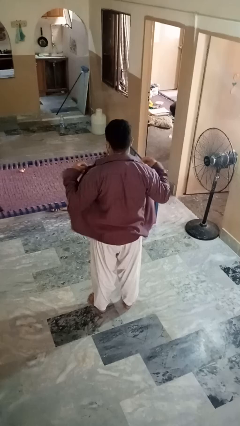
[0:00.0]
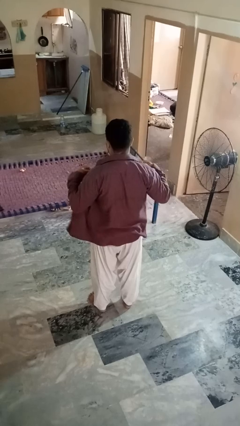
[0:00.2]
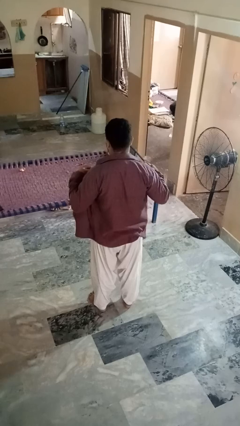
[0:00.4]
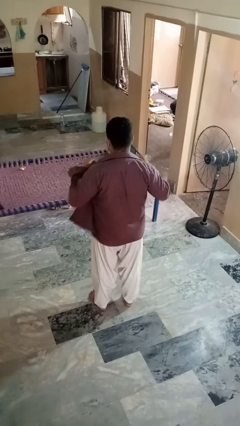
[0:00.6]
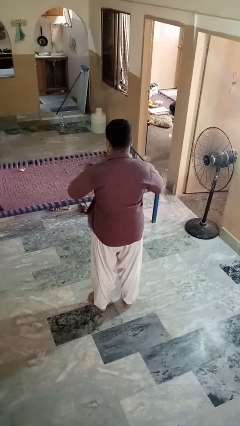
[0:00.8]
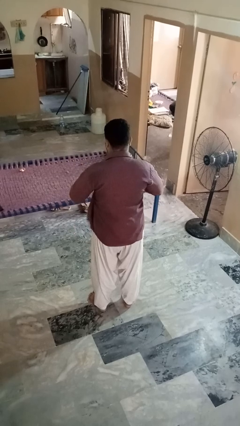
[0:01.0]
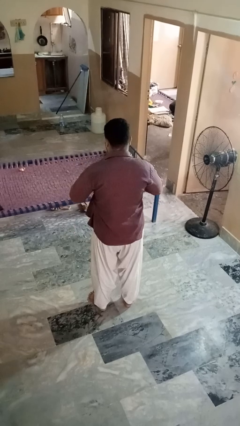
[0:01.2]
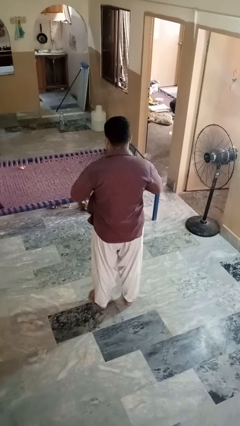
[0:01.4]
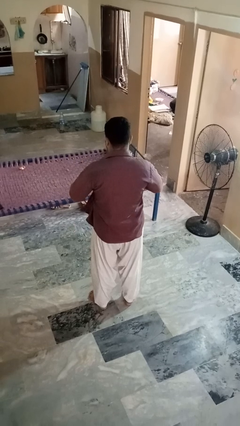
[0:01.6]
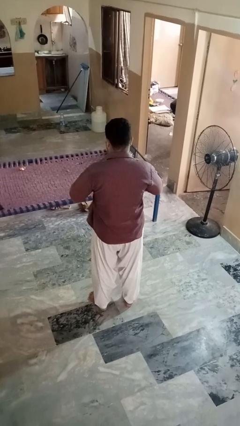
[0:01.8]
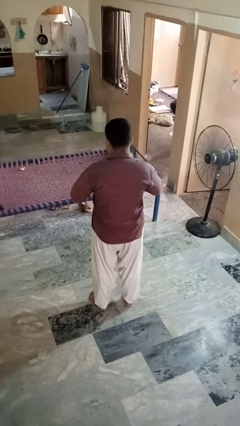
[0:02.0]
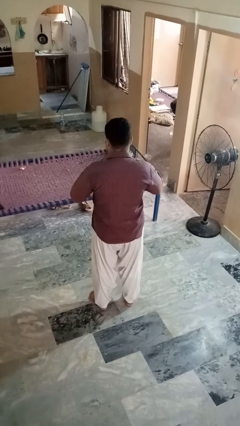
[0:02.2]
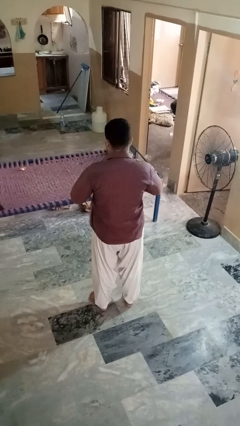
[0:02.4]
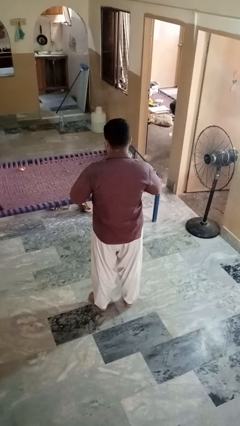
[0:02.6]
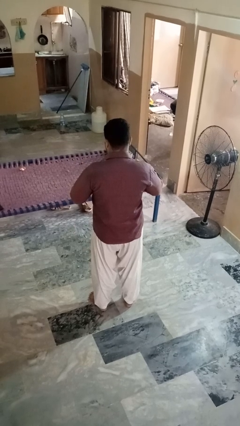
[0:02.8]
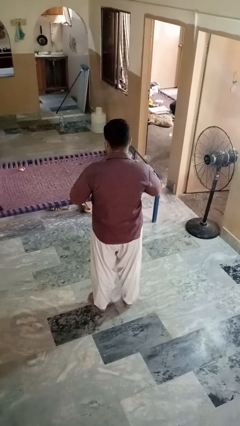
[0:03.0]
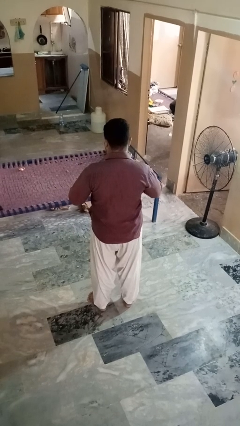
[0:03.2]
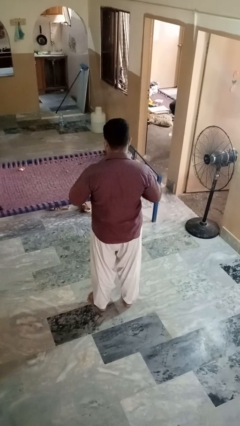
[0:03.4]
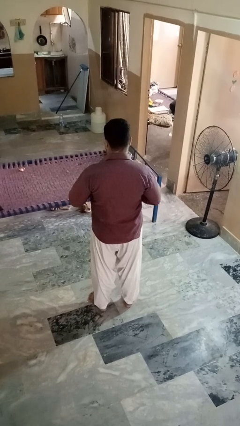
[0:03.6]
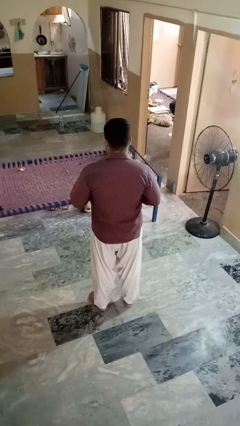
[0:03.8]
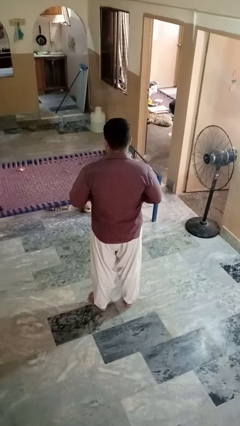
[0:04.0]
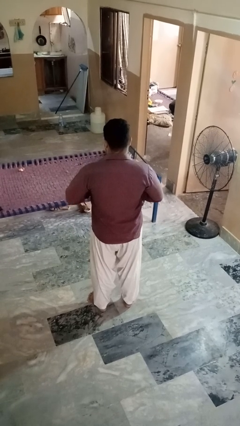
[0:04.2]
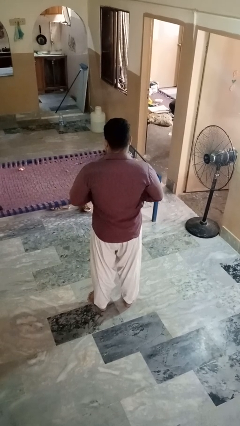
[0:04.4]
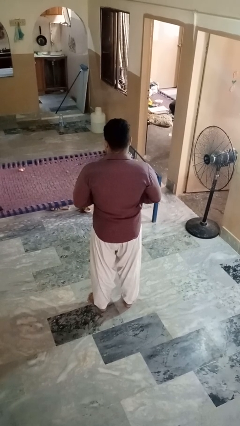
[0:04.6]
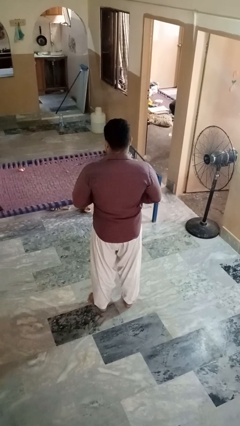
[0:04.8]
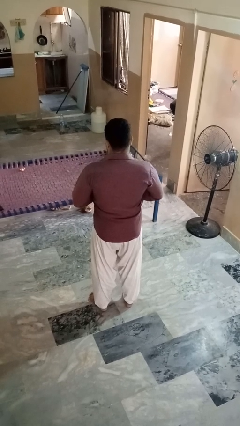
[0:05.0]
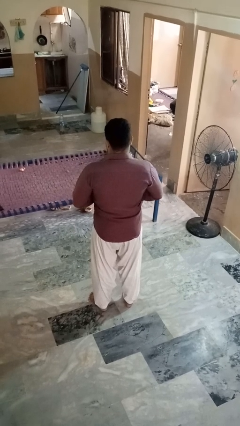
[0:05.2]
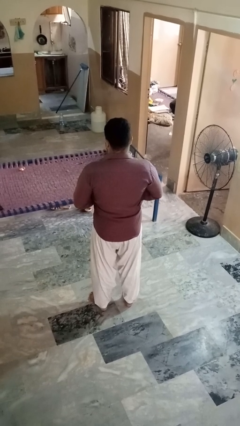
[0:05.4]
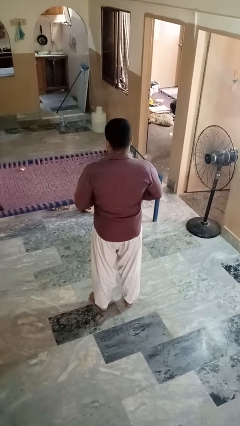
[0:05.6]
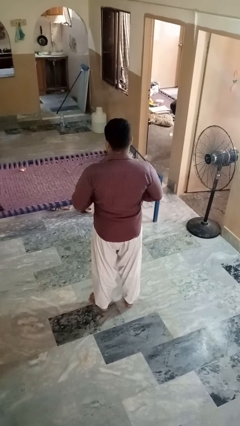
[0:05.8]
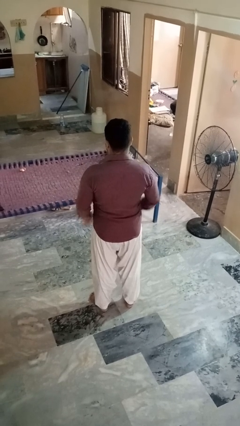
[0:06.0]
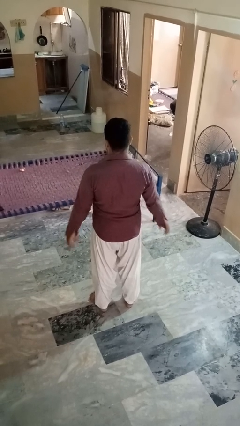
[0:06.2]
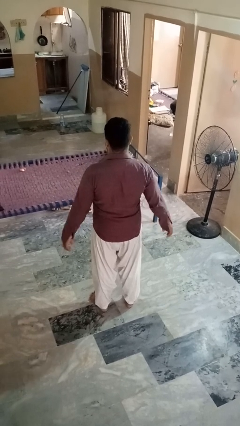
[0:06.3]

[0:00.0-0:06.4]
person buttons shirt

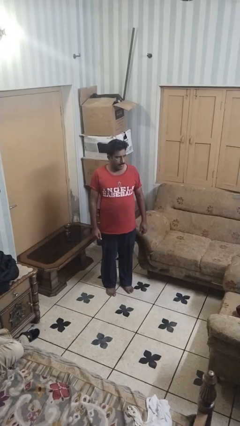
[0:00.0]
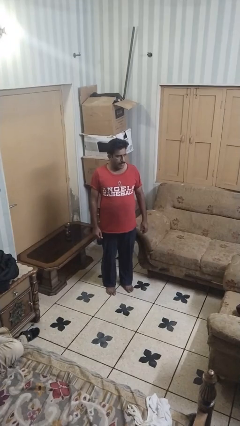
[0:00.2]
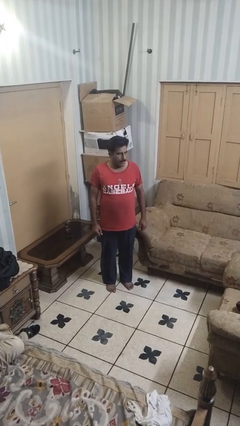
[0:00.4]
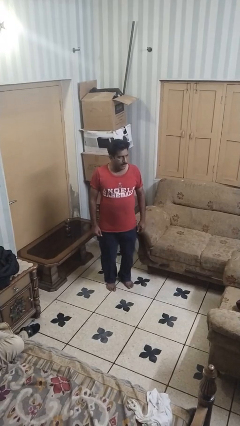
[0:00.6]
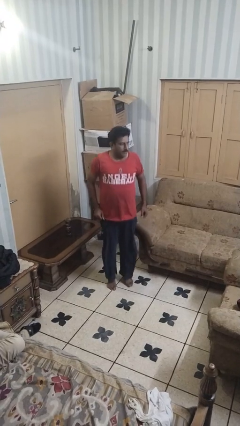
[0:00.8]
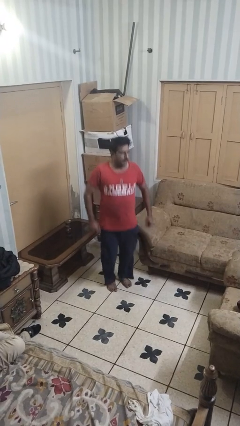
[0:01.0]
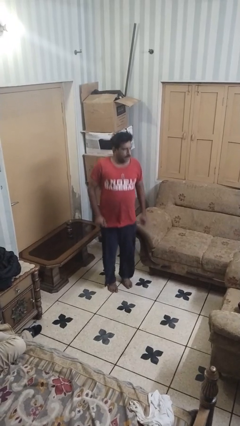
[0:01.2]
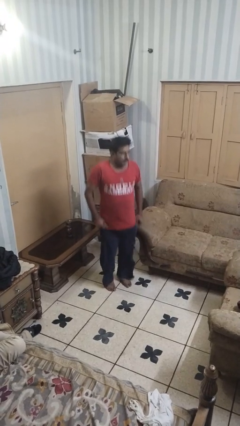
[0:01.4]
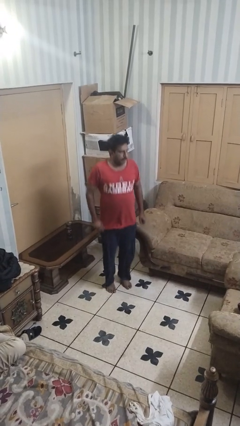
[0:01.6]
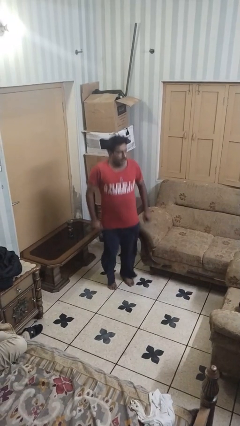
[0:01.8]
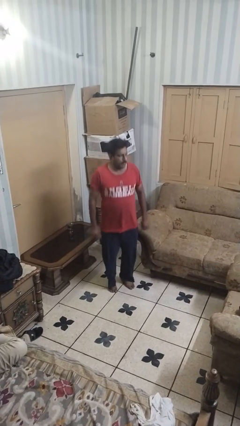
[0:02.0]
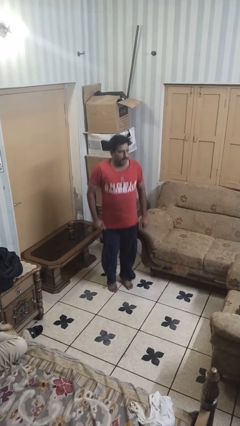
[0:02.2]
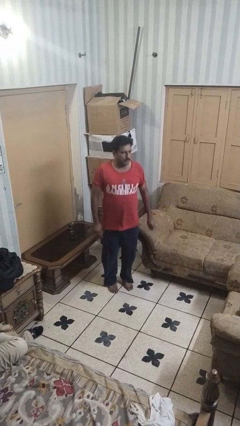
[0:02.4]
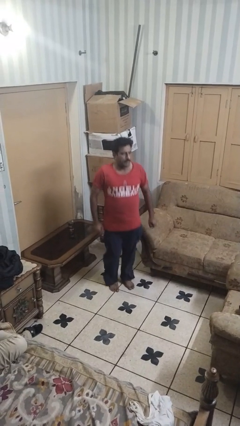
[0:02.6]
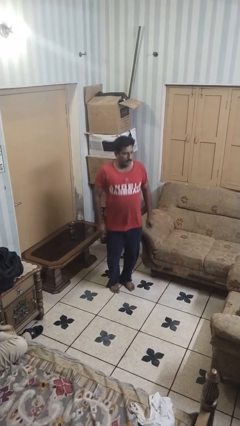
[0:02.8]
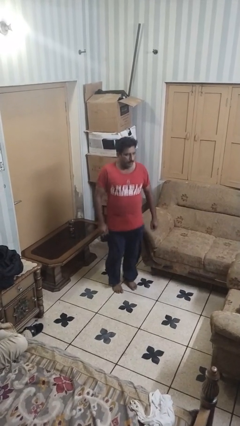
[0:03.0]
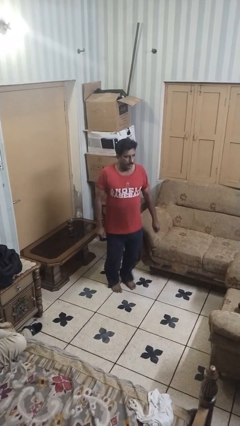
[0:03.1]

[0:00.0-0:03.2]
person jumps

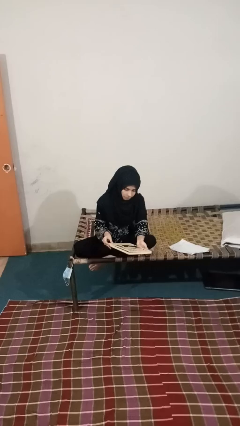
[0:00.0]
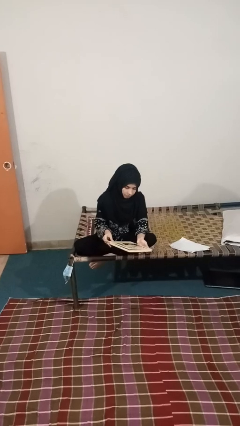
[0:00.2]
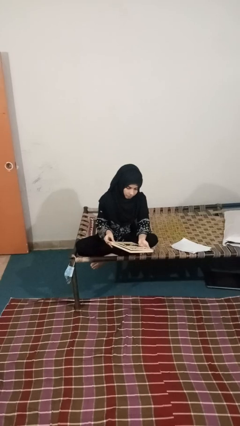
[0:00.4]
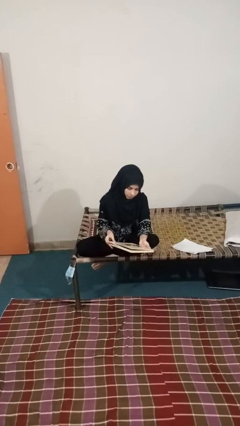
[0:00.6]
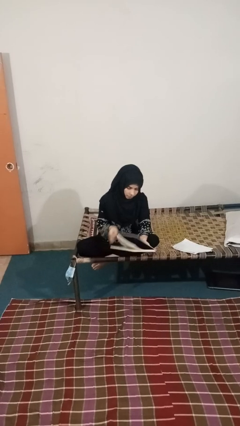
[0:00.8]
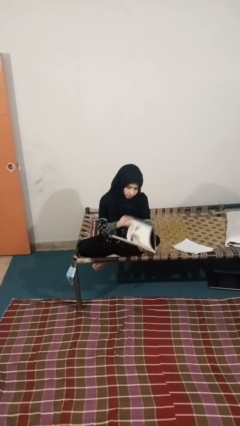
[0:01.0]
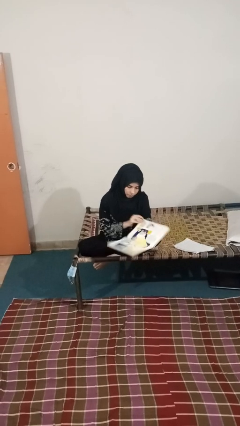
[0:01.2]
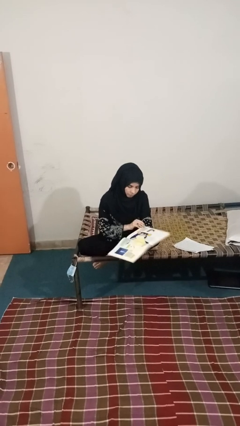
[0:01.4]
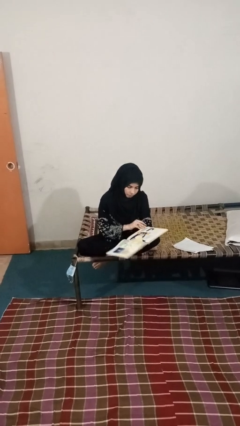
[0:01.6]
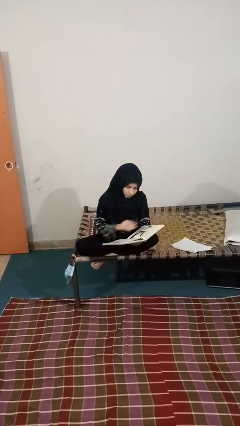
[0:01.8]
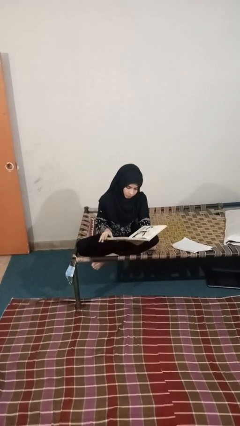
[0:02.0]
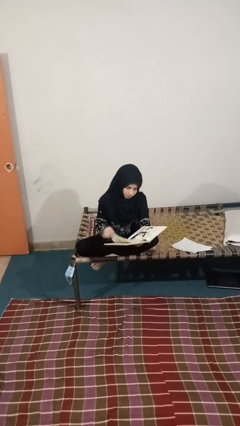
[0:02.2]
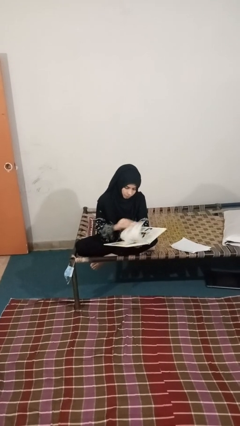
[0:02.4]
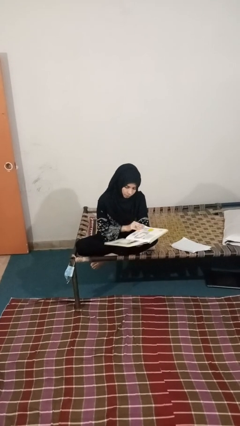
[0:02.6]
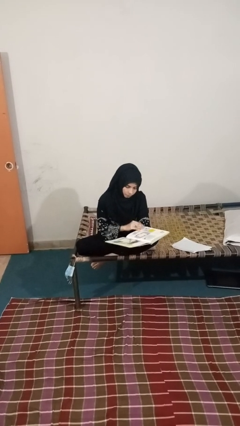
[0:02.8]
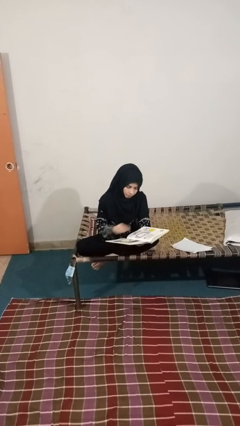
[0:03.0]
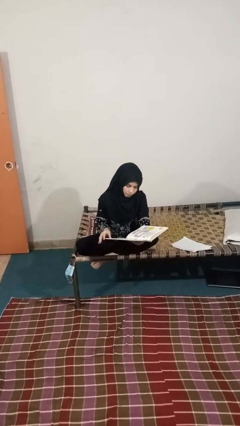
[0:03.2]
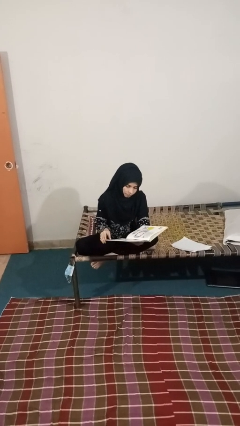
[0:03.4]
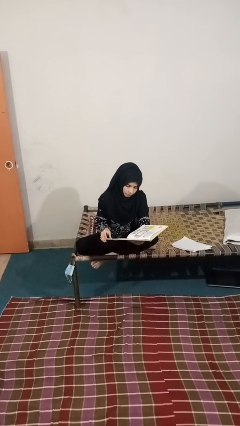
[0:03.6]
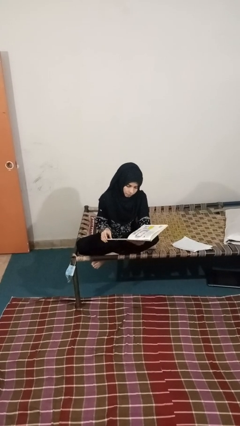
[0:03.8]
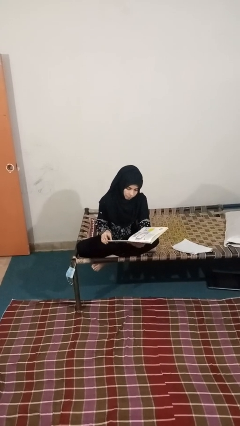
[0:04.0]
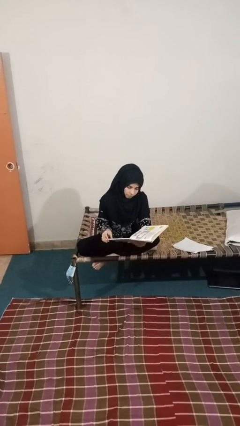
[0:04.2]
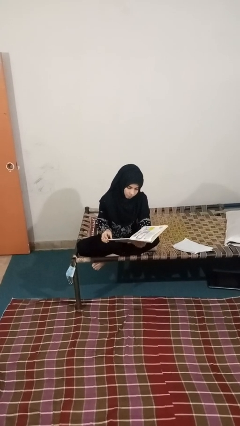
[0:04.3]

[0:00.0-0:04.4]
person reads magazine

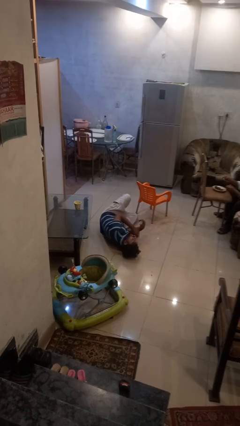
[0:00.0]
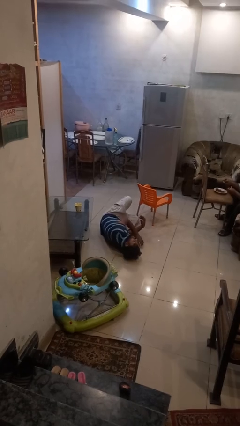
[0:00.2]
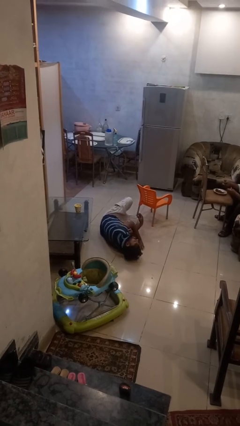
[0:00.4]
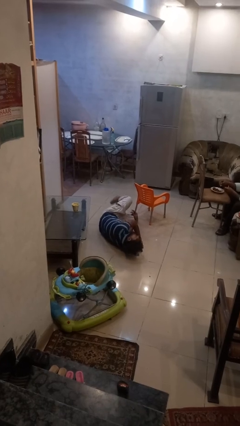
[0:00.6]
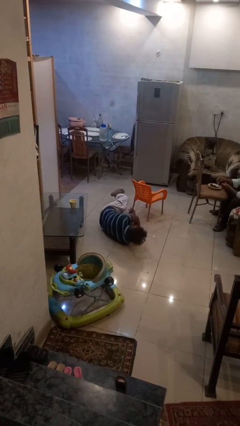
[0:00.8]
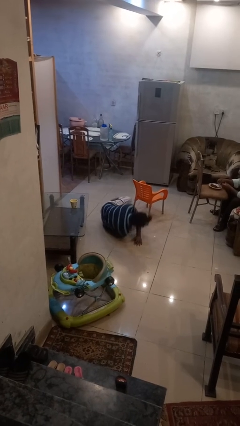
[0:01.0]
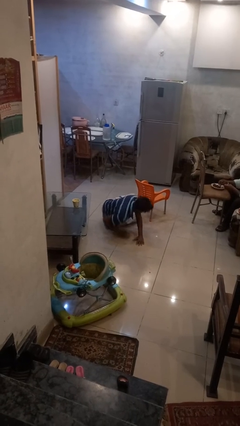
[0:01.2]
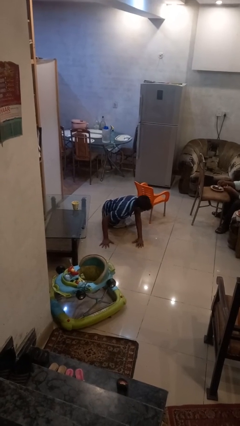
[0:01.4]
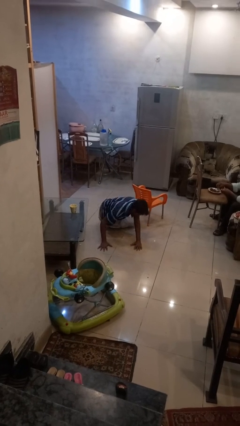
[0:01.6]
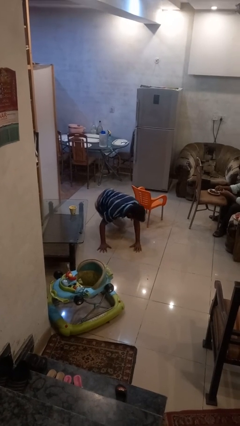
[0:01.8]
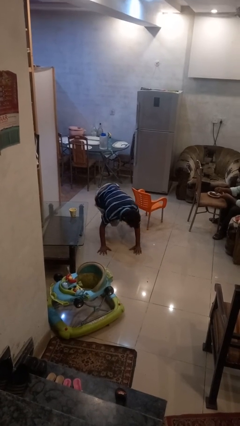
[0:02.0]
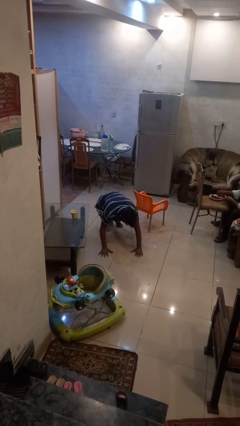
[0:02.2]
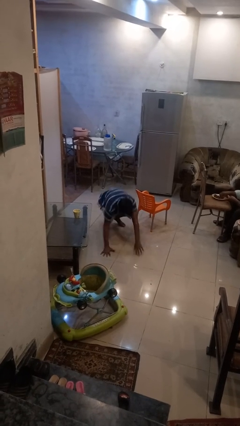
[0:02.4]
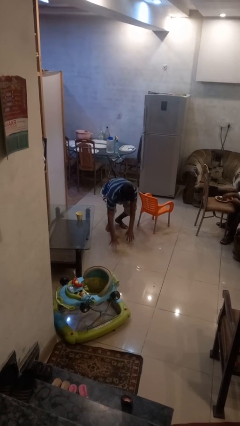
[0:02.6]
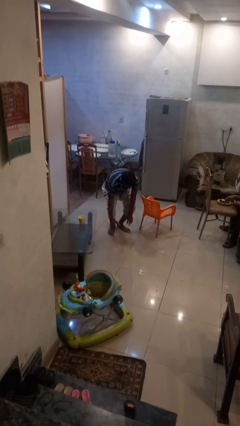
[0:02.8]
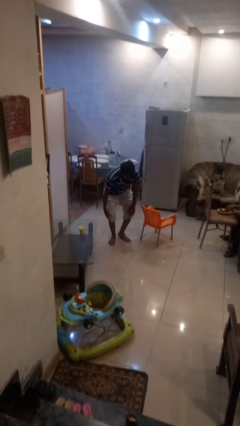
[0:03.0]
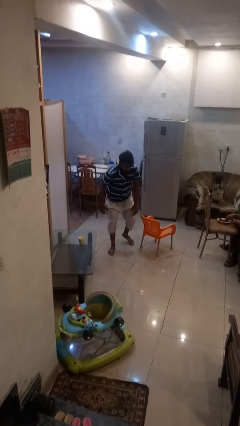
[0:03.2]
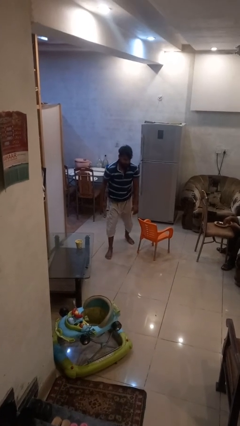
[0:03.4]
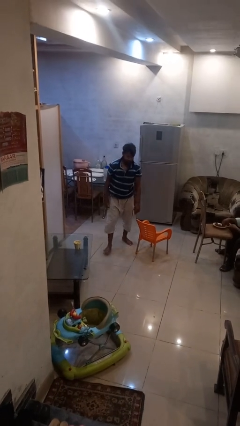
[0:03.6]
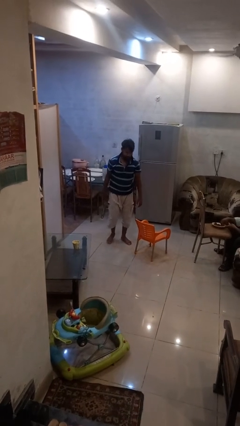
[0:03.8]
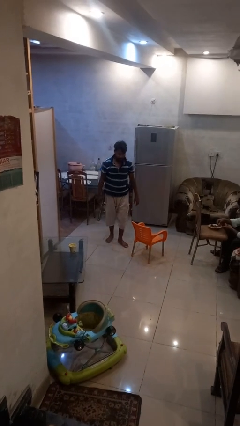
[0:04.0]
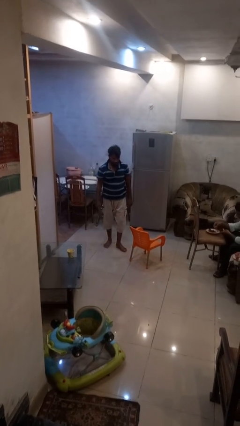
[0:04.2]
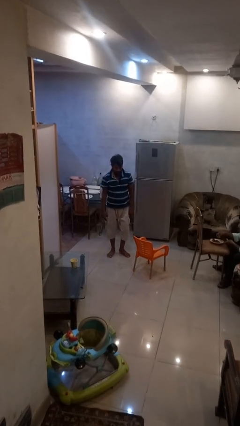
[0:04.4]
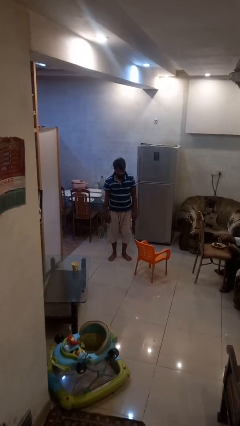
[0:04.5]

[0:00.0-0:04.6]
person stands up from floor
